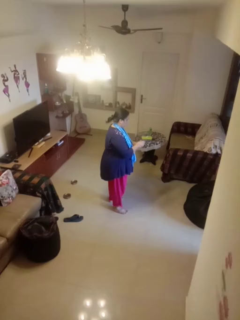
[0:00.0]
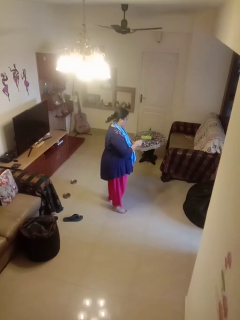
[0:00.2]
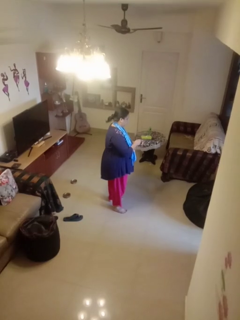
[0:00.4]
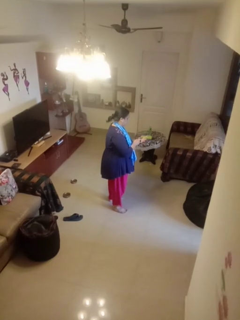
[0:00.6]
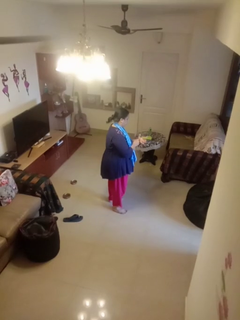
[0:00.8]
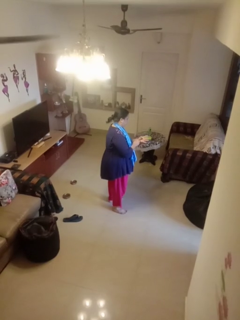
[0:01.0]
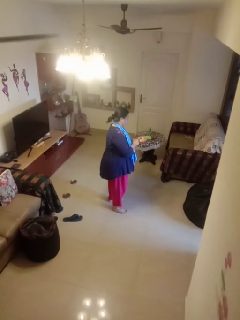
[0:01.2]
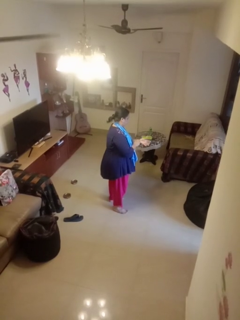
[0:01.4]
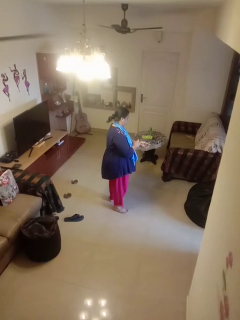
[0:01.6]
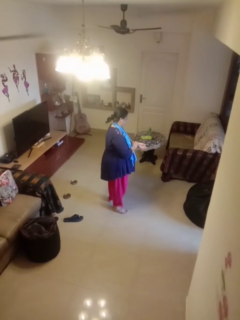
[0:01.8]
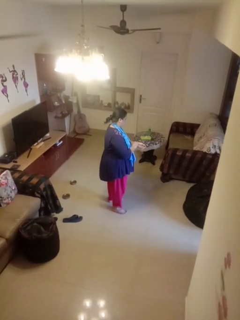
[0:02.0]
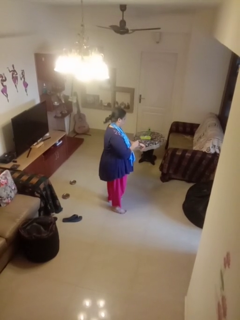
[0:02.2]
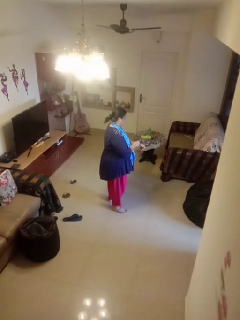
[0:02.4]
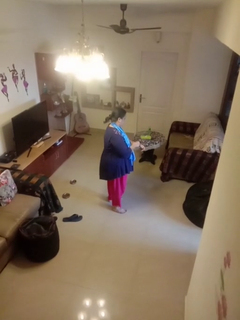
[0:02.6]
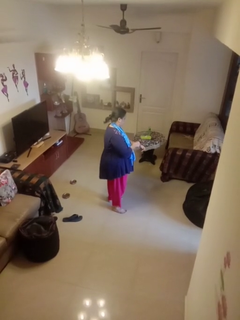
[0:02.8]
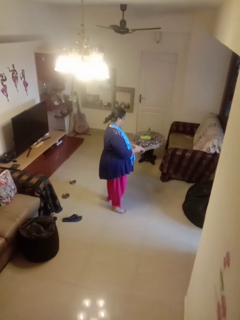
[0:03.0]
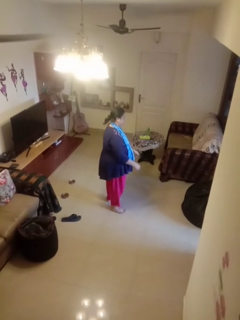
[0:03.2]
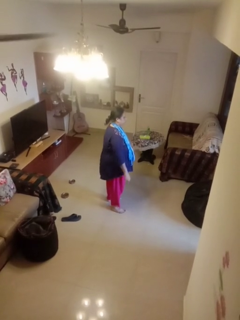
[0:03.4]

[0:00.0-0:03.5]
person puts on wristwatch

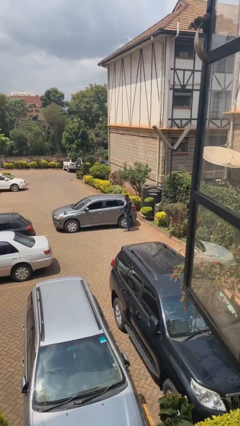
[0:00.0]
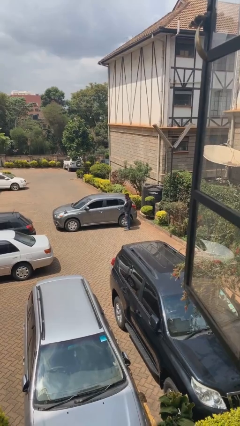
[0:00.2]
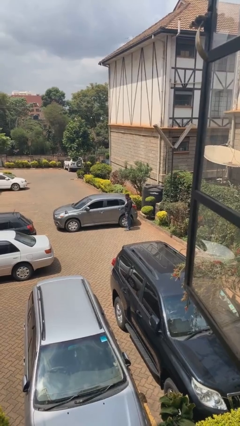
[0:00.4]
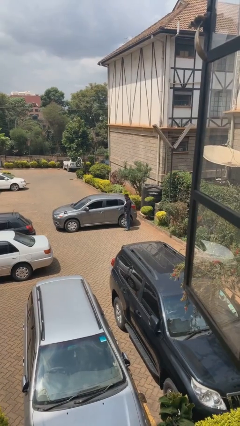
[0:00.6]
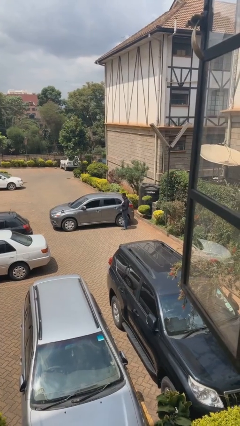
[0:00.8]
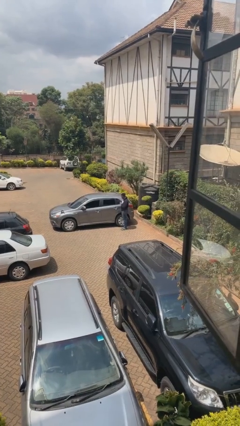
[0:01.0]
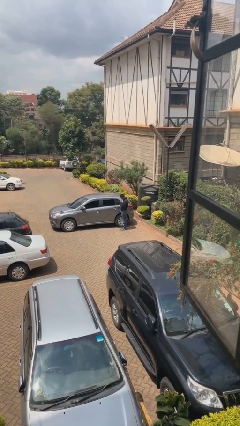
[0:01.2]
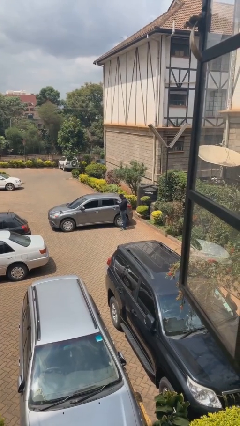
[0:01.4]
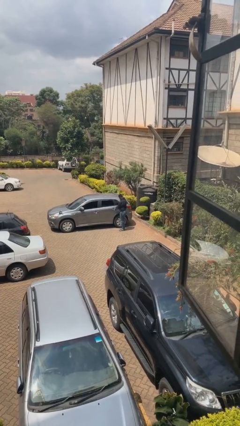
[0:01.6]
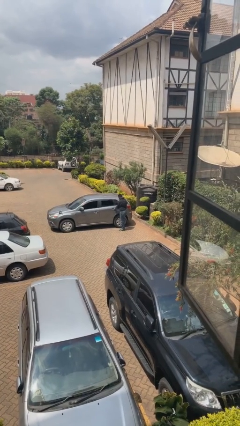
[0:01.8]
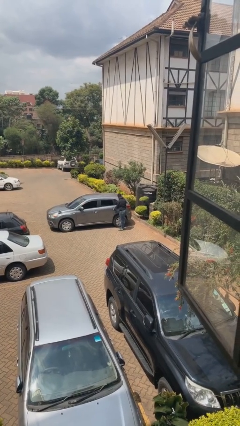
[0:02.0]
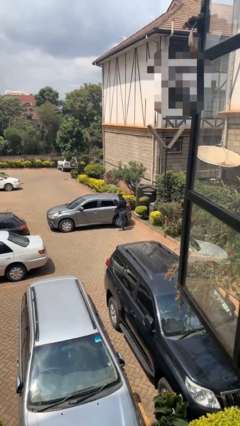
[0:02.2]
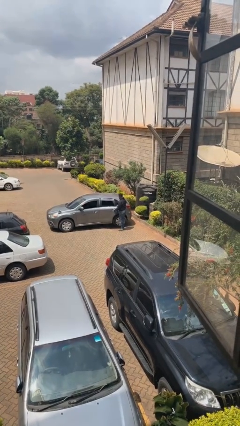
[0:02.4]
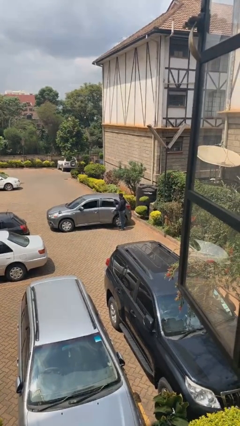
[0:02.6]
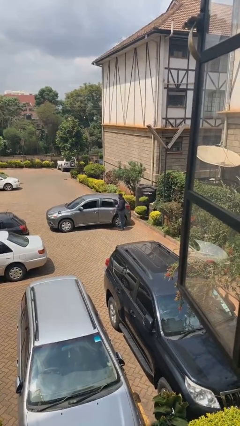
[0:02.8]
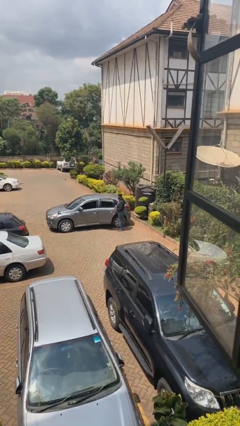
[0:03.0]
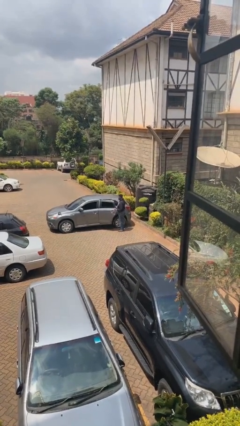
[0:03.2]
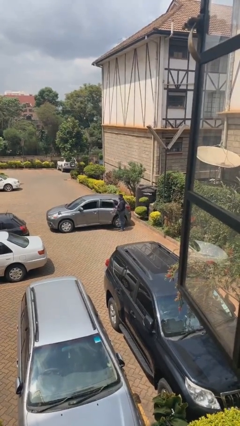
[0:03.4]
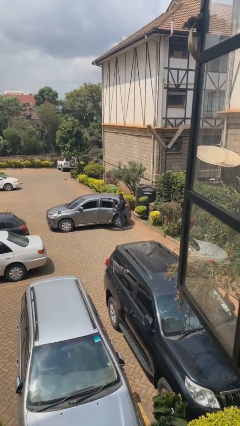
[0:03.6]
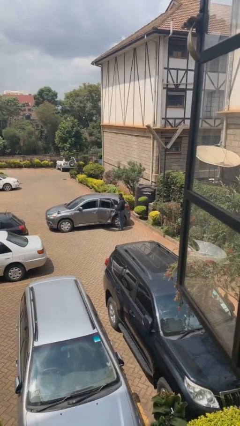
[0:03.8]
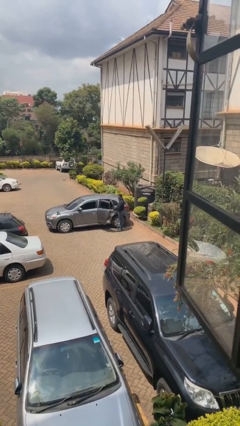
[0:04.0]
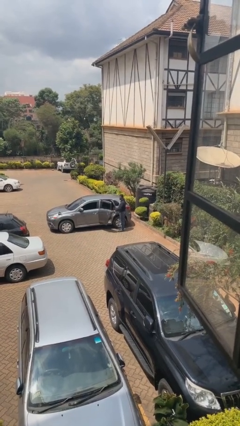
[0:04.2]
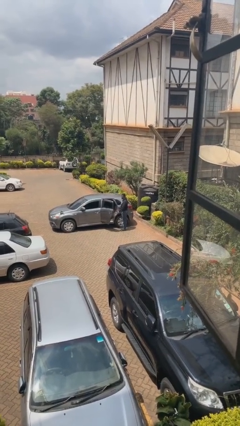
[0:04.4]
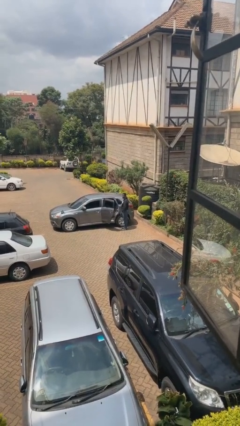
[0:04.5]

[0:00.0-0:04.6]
person opens car door

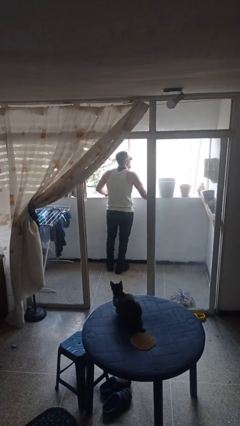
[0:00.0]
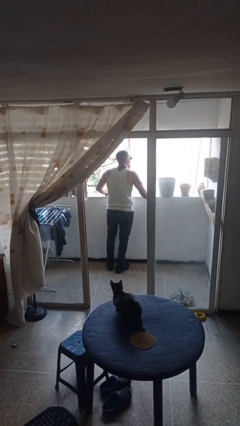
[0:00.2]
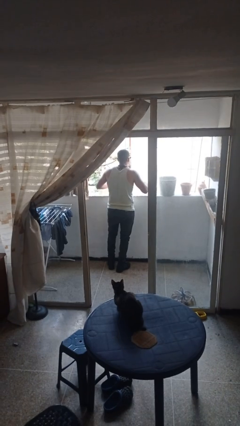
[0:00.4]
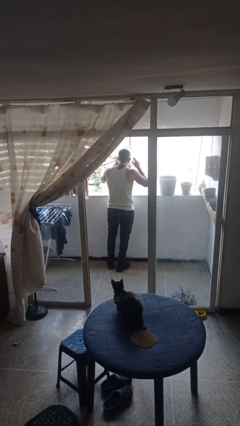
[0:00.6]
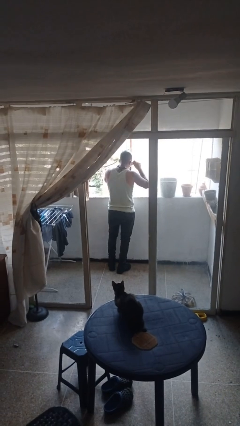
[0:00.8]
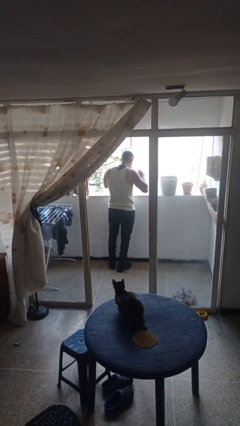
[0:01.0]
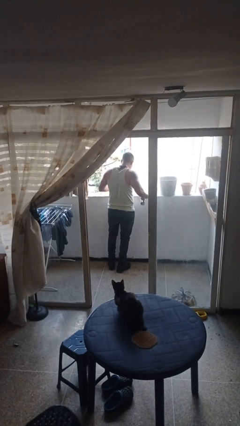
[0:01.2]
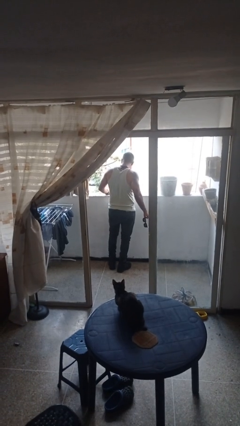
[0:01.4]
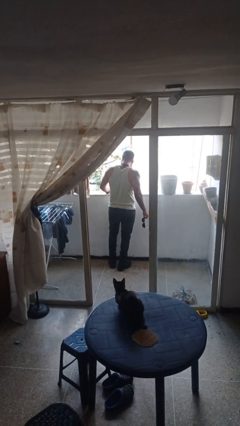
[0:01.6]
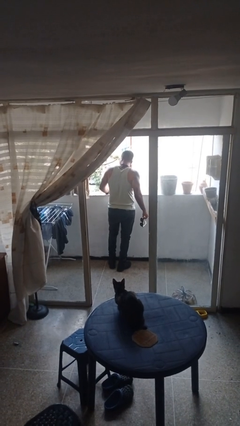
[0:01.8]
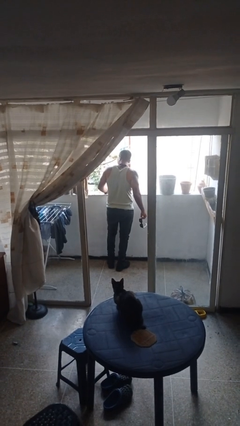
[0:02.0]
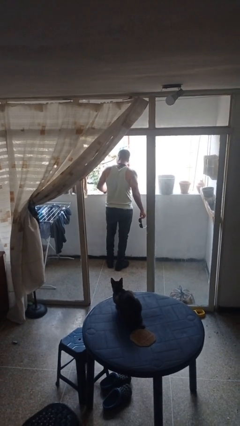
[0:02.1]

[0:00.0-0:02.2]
person takes off sunglasses

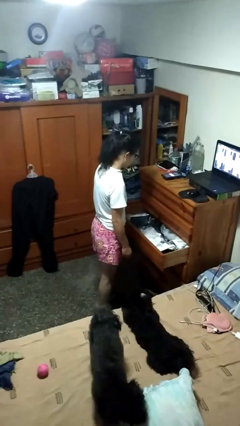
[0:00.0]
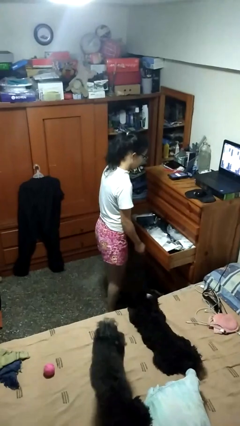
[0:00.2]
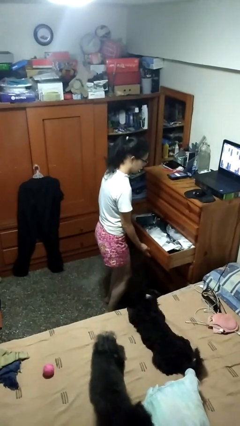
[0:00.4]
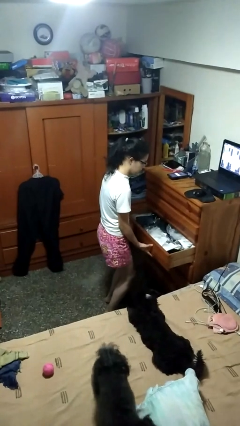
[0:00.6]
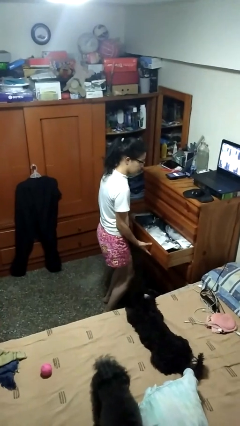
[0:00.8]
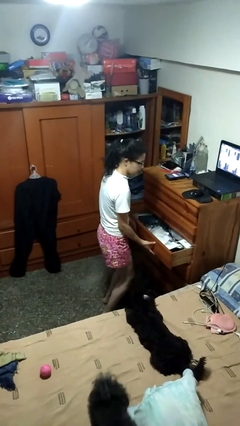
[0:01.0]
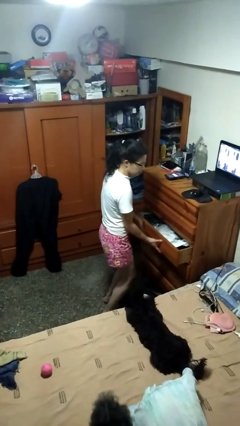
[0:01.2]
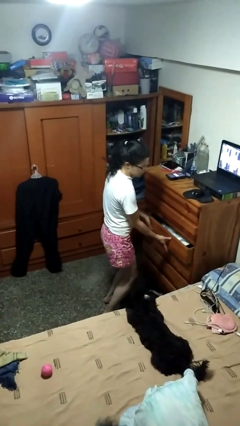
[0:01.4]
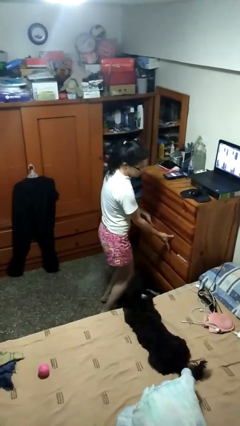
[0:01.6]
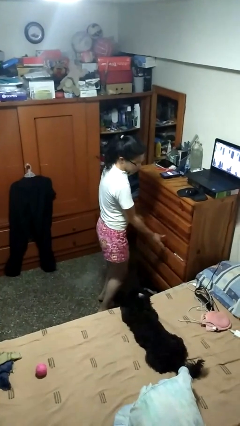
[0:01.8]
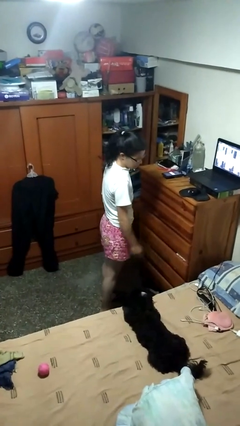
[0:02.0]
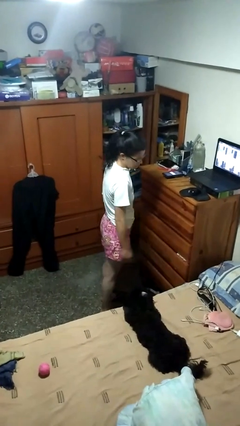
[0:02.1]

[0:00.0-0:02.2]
person closes dresser drawer

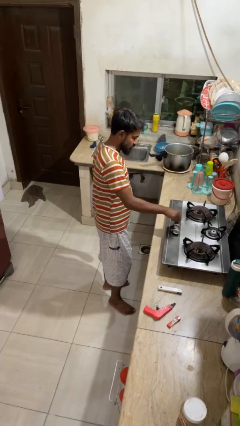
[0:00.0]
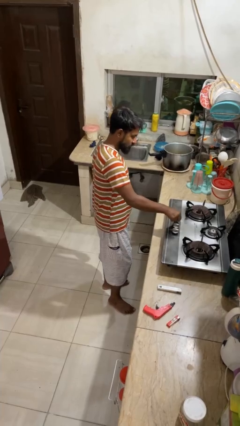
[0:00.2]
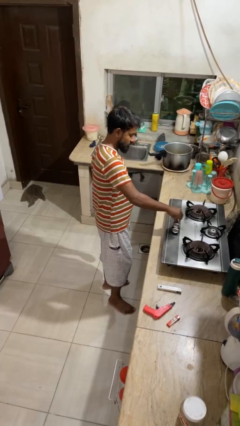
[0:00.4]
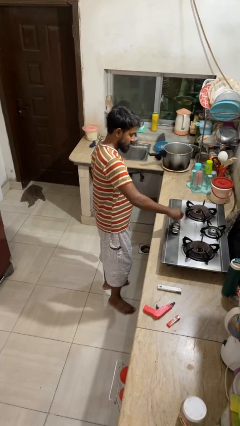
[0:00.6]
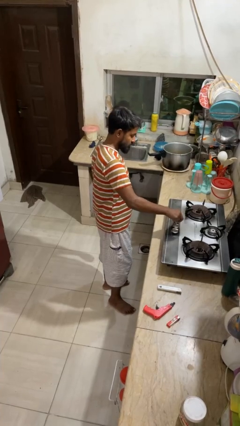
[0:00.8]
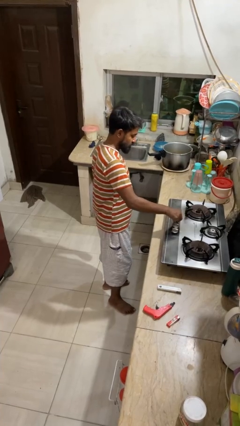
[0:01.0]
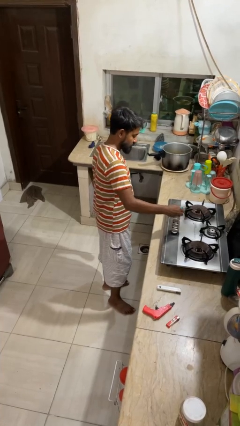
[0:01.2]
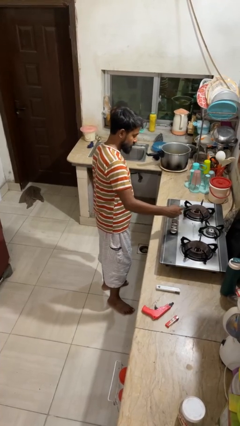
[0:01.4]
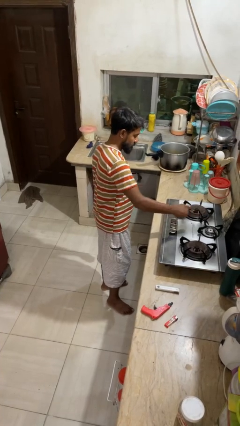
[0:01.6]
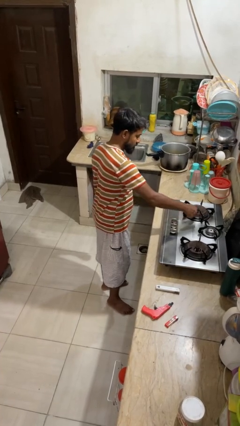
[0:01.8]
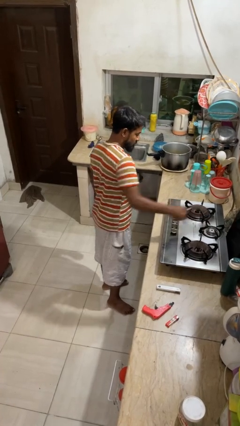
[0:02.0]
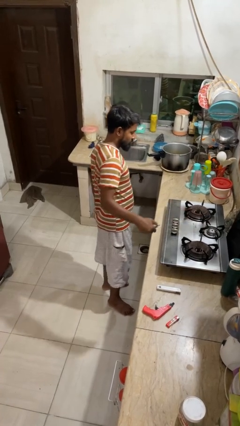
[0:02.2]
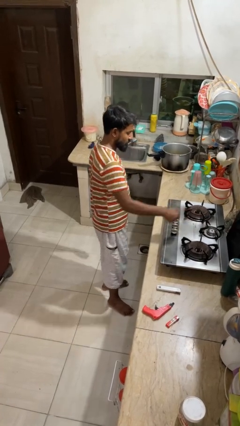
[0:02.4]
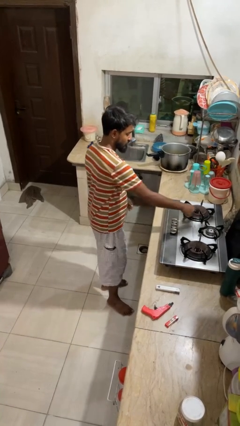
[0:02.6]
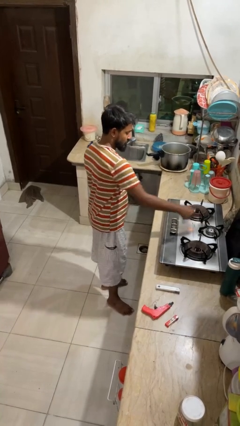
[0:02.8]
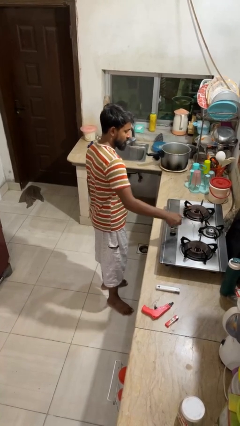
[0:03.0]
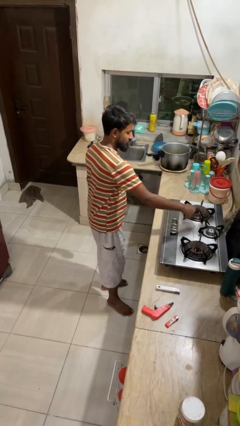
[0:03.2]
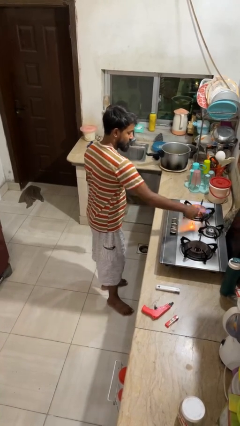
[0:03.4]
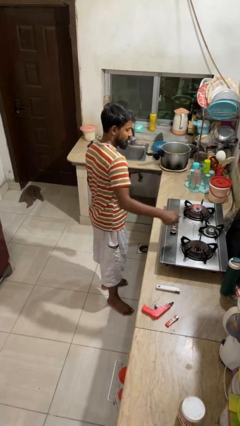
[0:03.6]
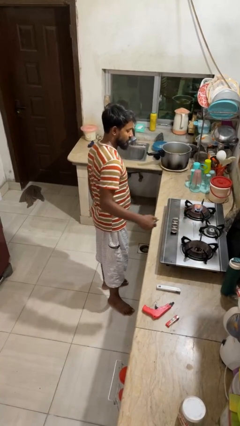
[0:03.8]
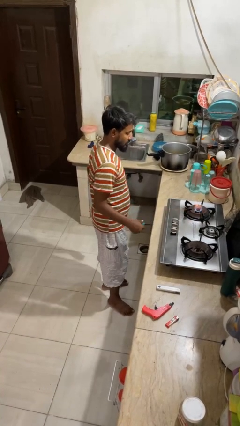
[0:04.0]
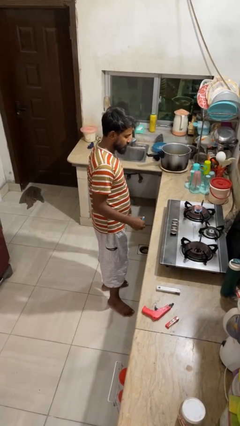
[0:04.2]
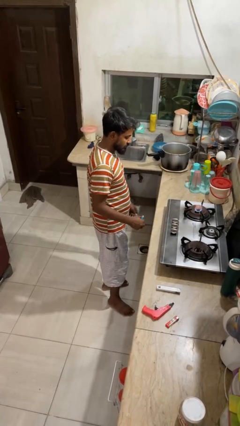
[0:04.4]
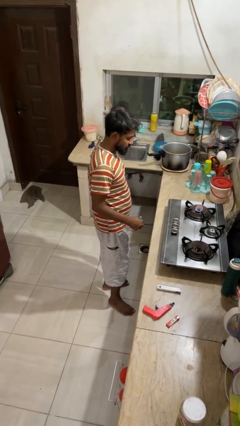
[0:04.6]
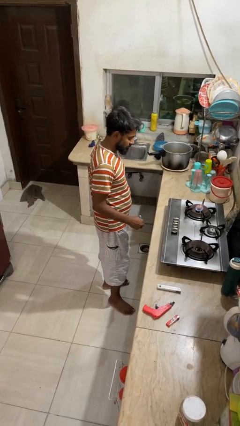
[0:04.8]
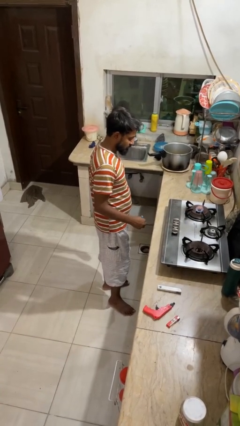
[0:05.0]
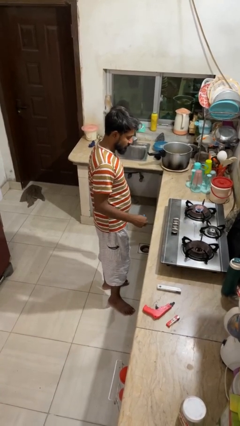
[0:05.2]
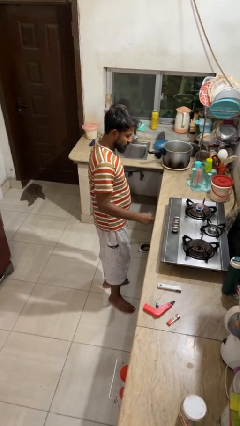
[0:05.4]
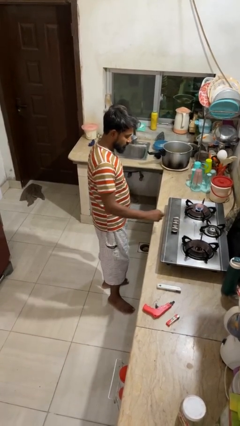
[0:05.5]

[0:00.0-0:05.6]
person turns on stovetop

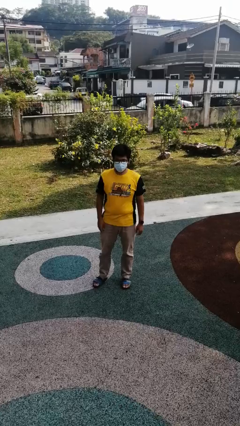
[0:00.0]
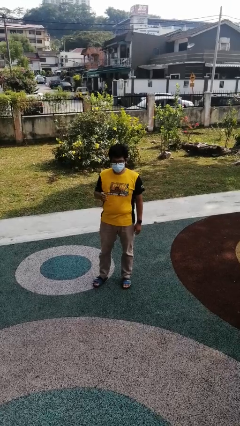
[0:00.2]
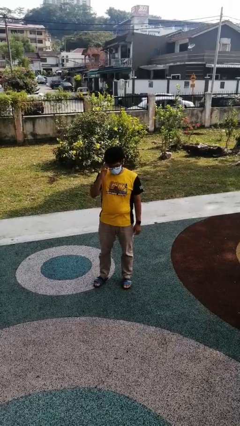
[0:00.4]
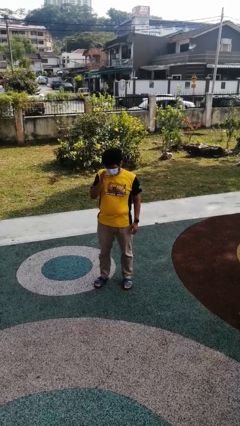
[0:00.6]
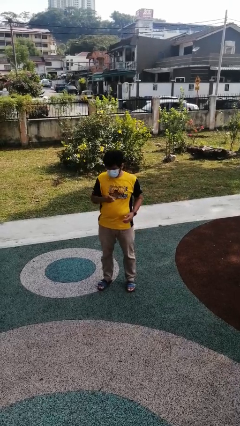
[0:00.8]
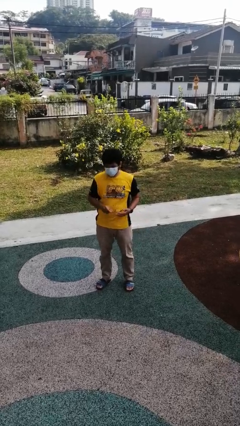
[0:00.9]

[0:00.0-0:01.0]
person takes off glasses
